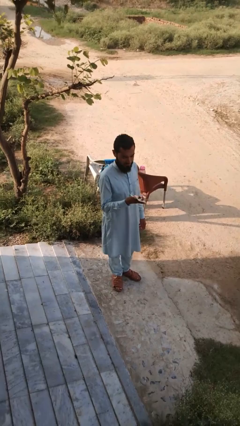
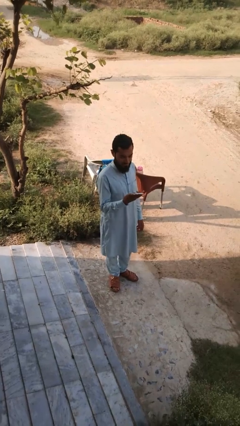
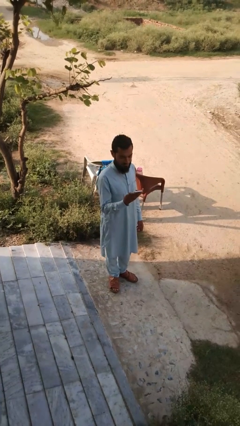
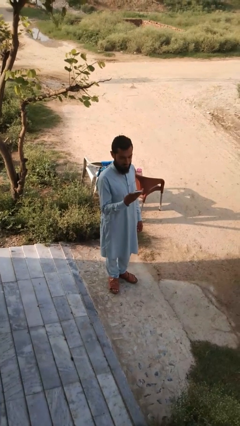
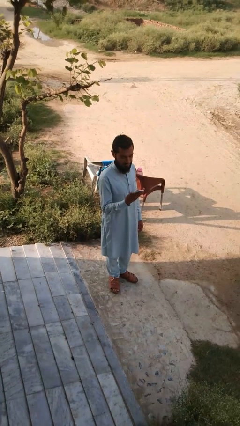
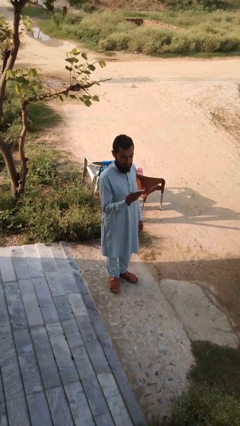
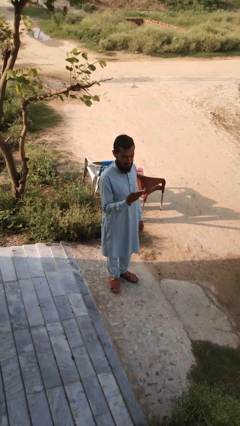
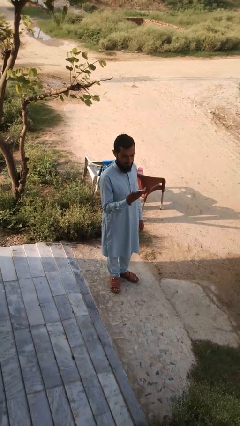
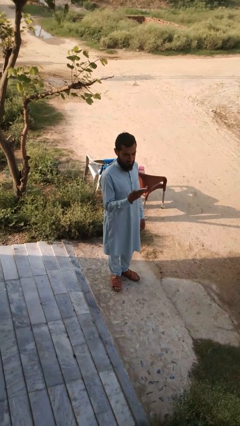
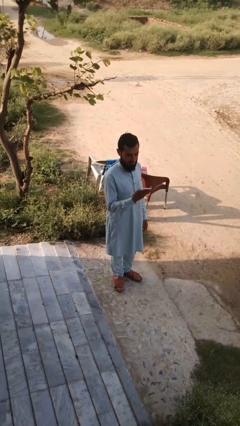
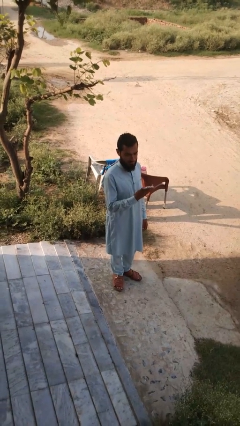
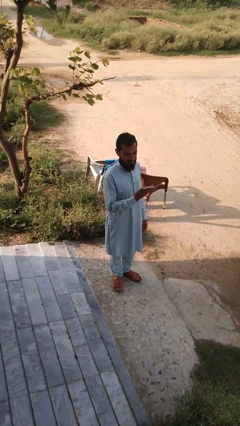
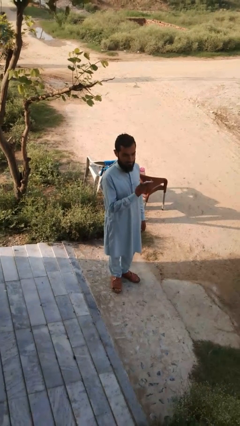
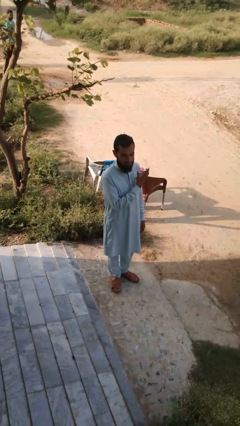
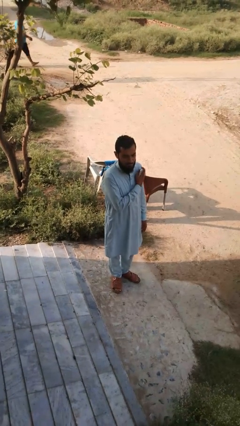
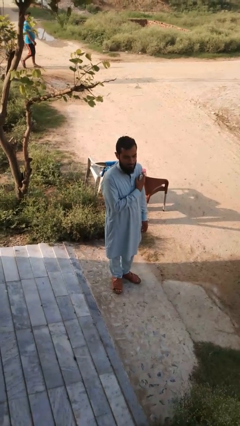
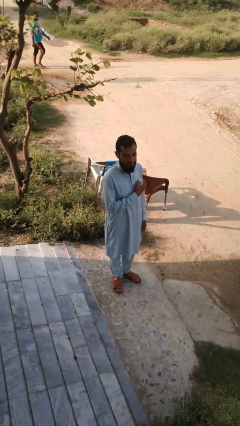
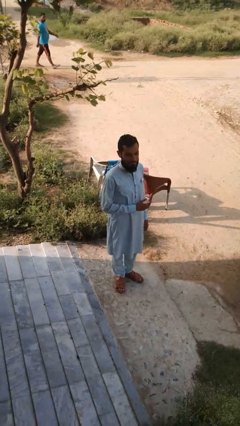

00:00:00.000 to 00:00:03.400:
person puts phone into pocket

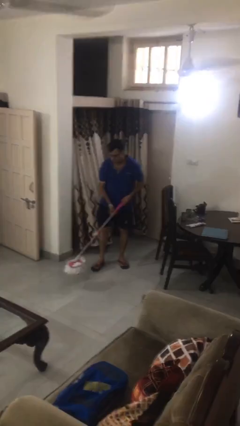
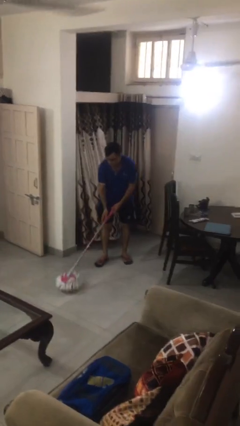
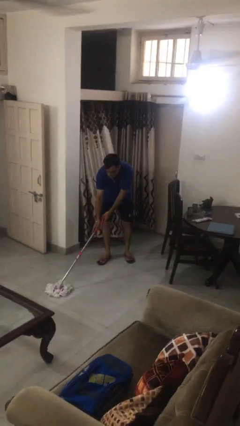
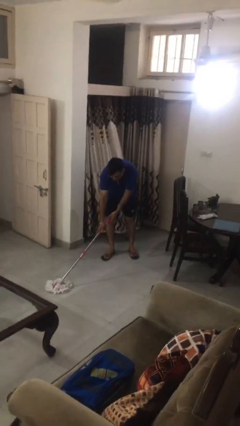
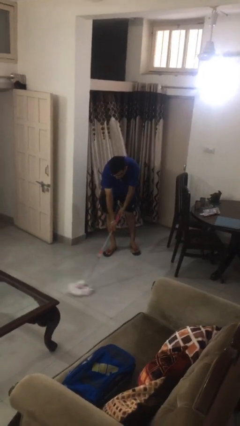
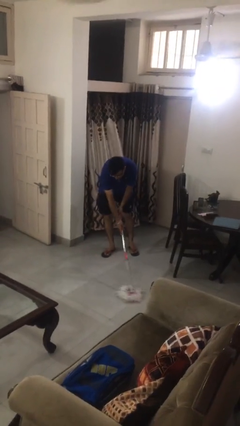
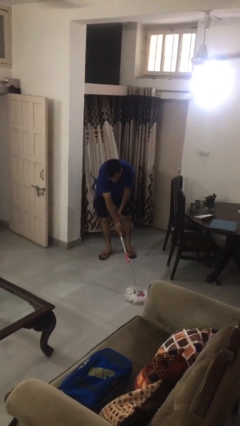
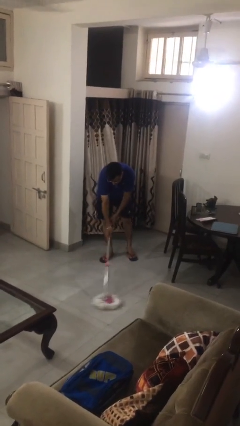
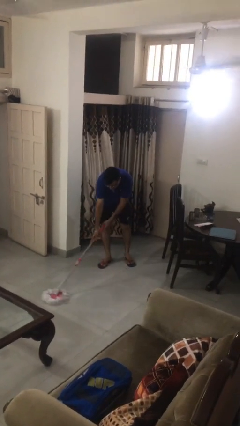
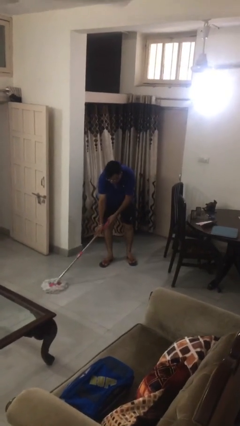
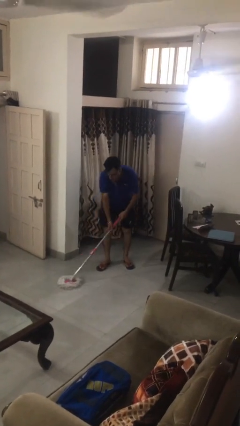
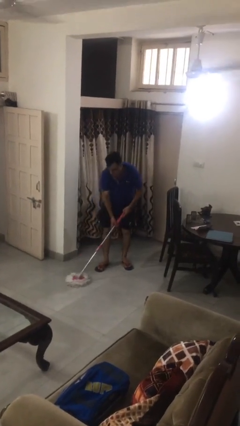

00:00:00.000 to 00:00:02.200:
person mops

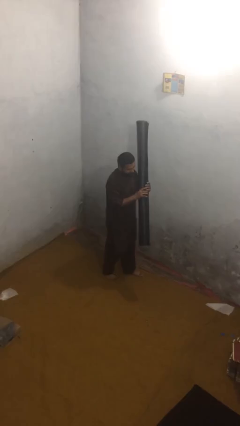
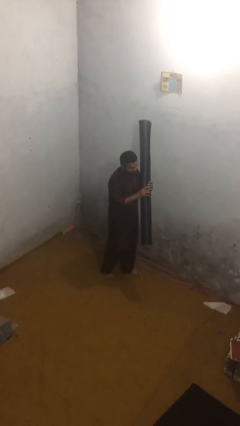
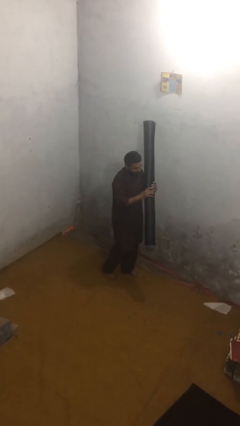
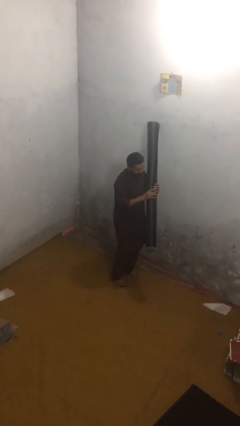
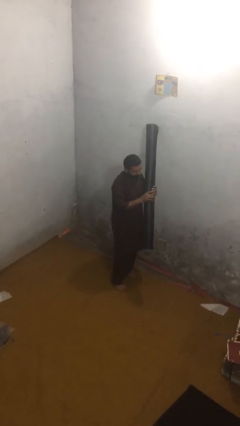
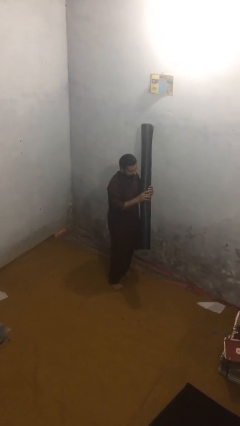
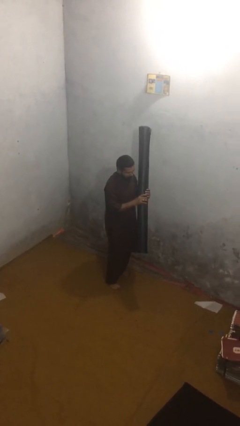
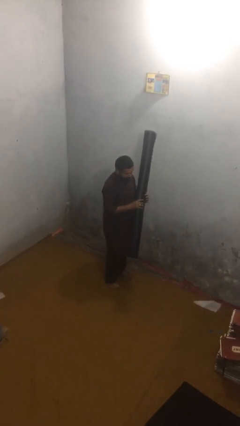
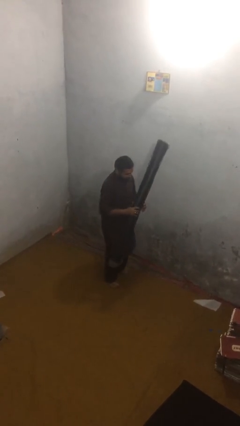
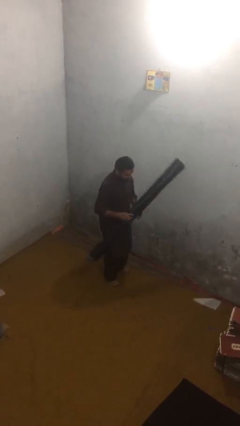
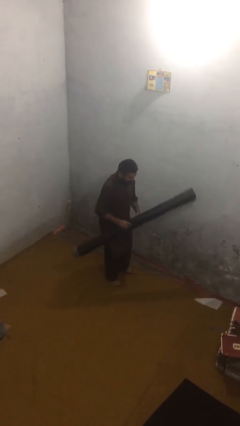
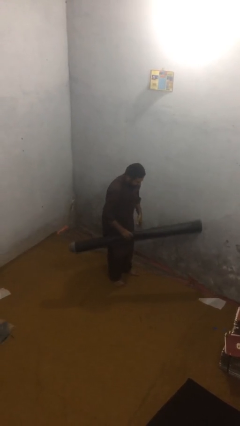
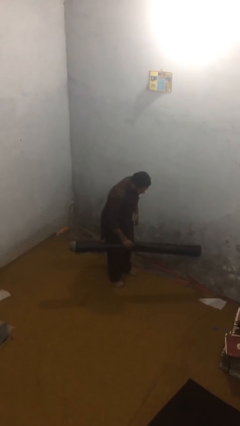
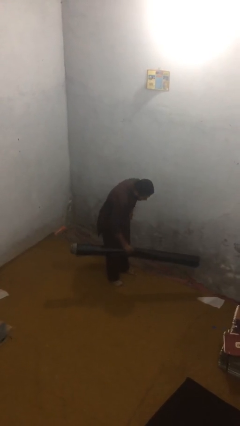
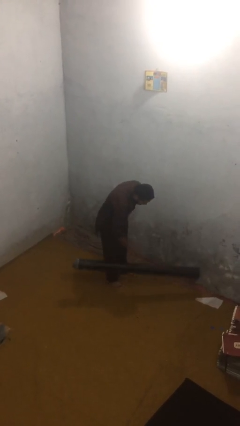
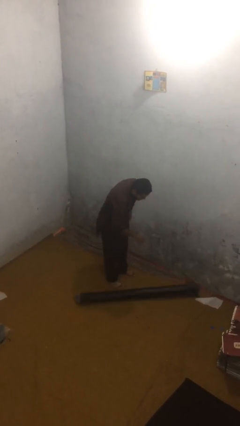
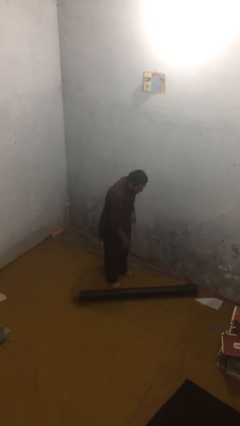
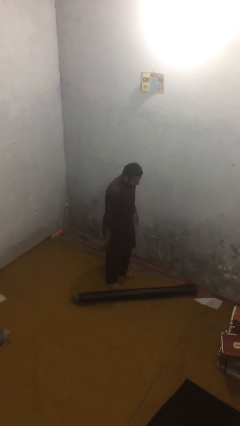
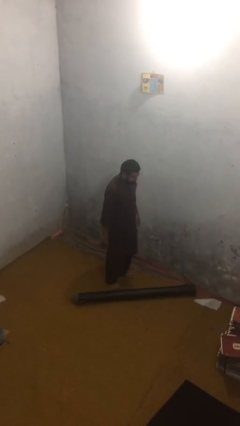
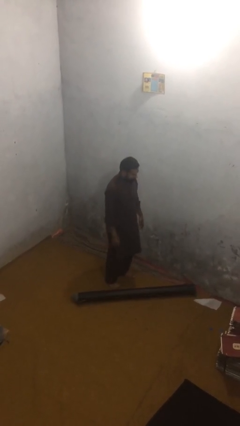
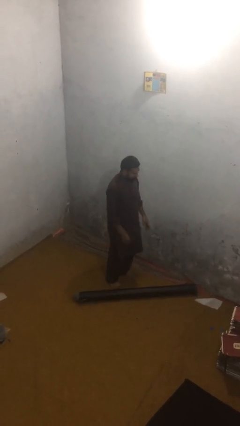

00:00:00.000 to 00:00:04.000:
person puts down object on floor

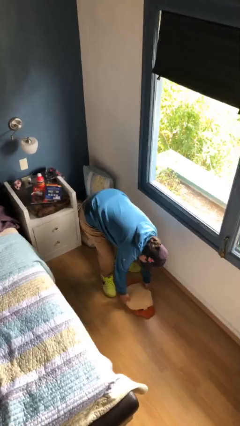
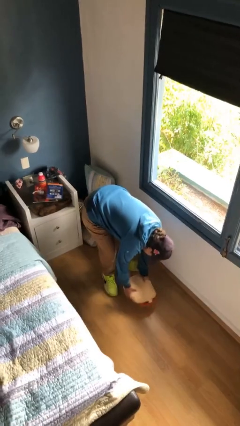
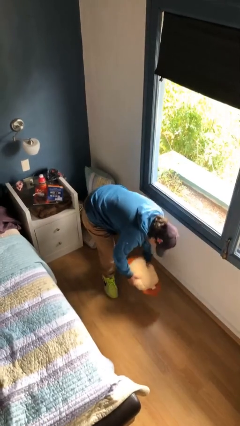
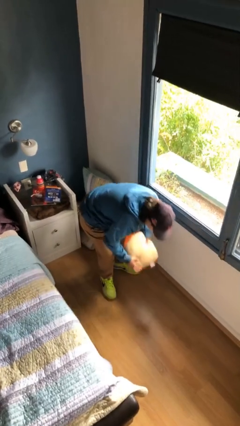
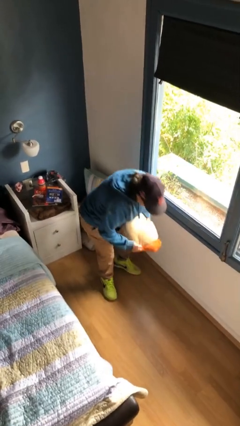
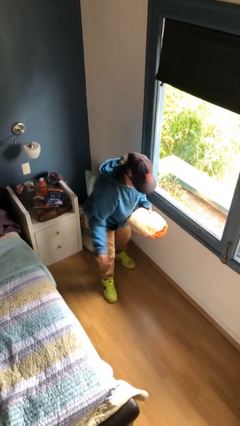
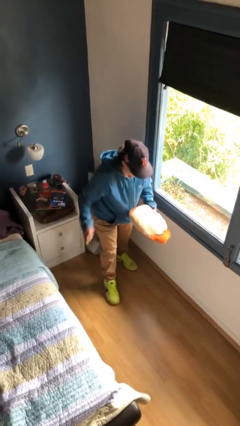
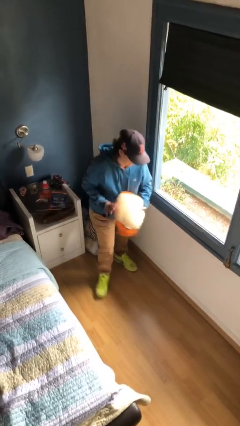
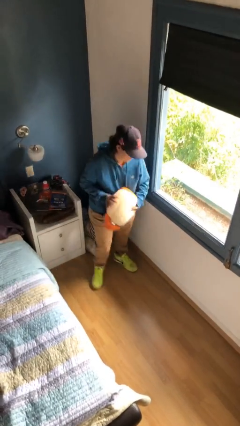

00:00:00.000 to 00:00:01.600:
person picks up object from floor

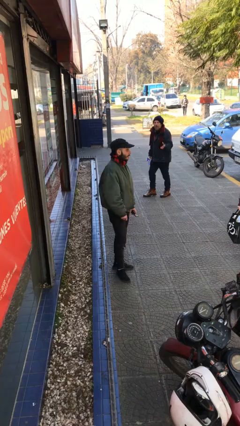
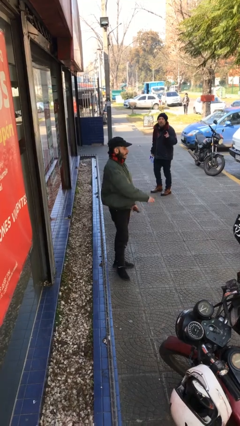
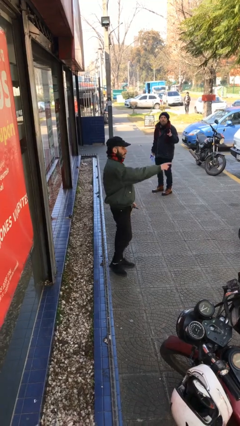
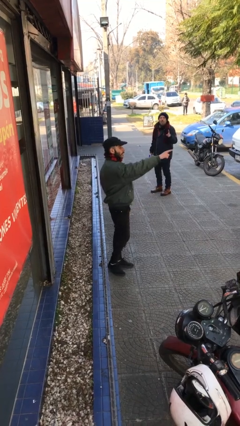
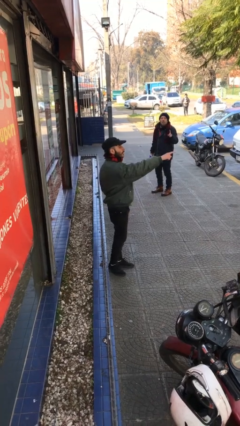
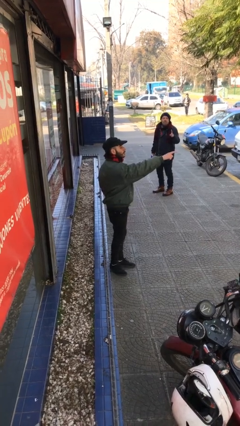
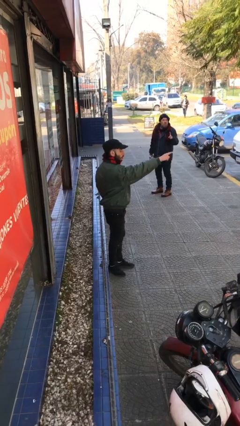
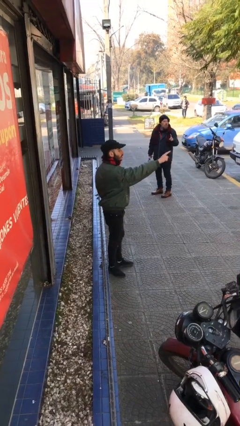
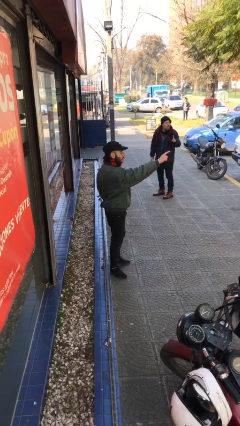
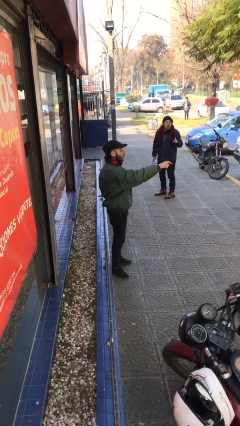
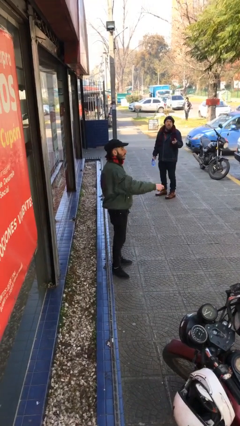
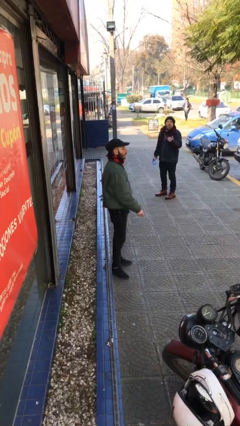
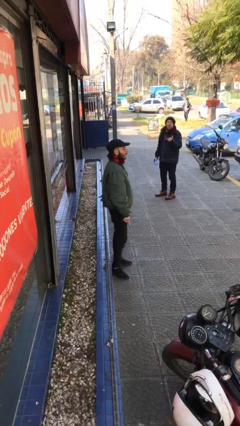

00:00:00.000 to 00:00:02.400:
person points at person

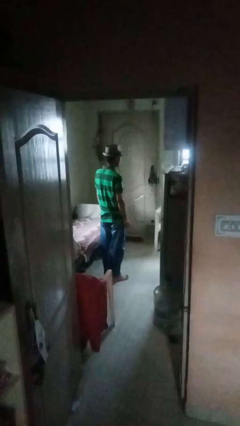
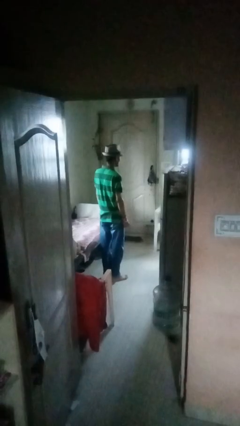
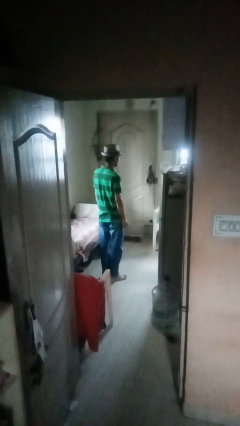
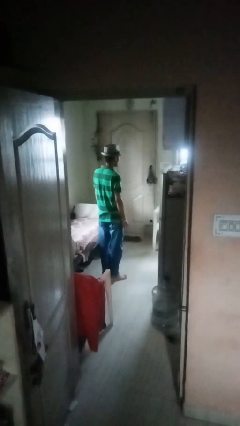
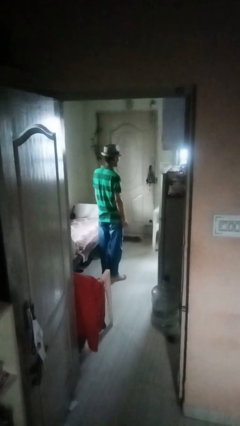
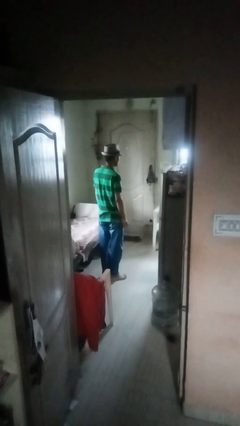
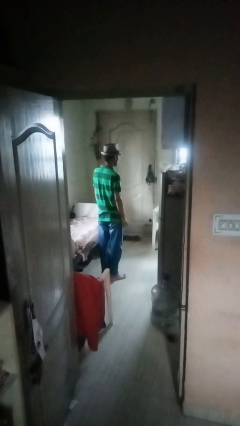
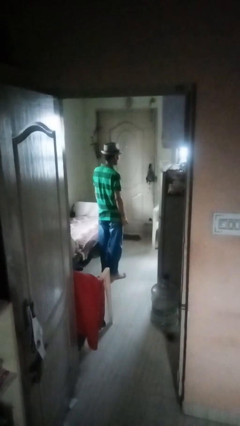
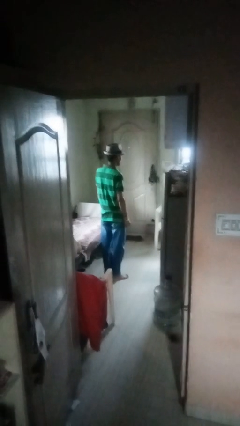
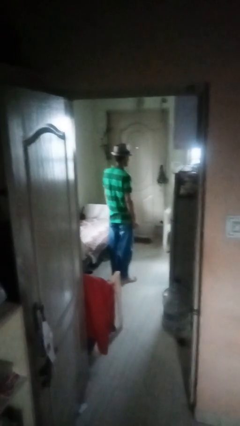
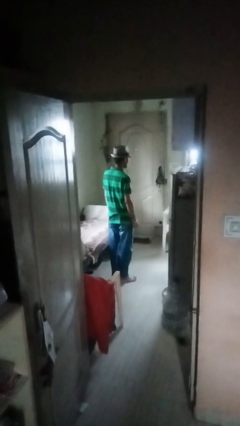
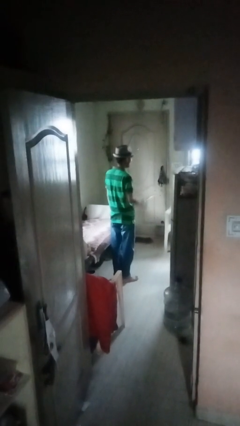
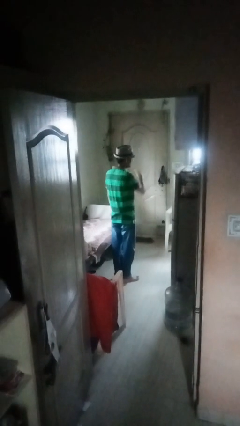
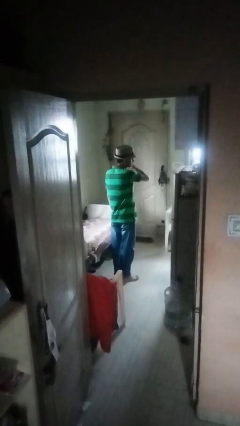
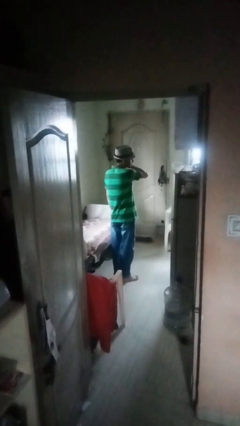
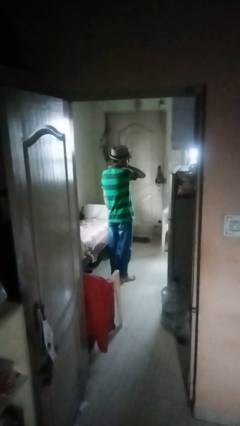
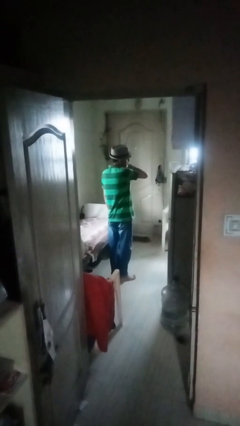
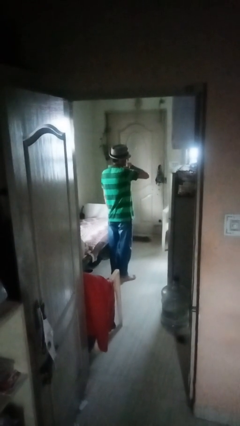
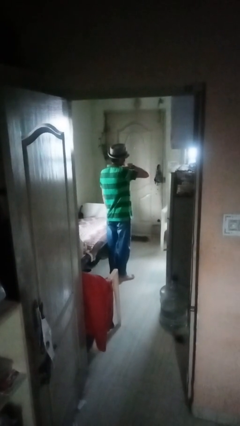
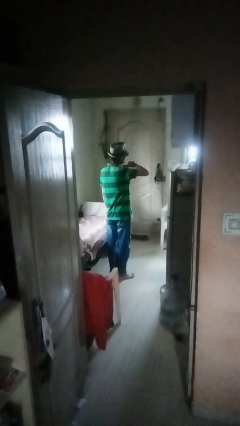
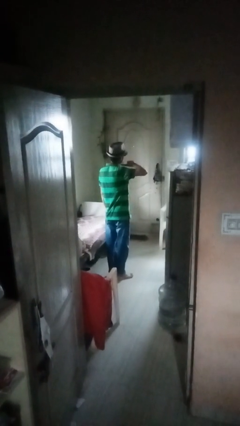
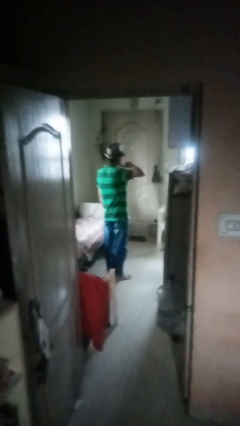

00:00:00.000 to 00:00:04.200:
person gestures cut
